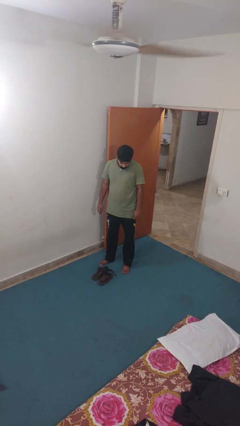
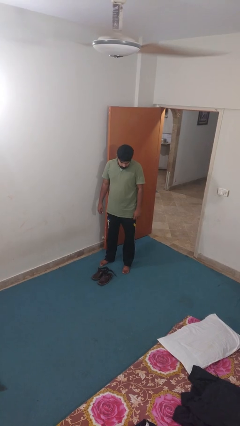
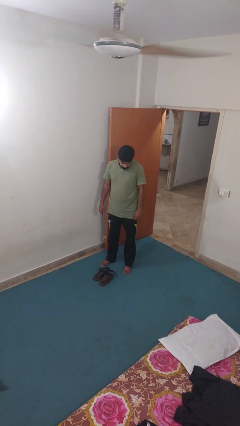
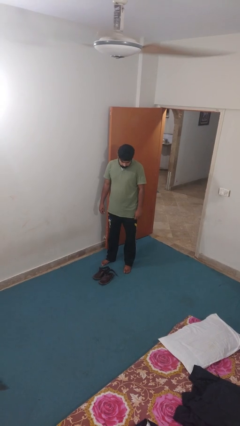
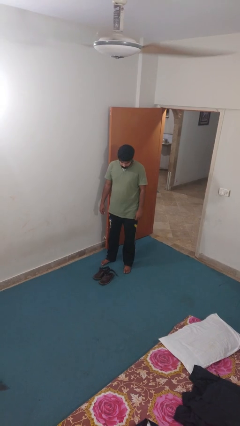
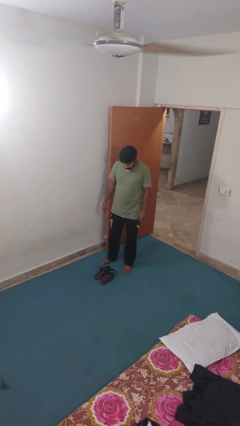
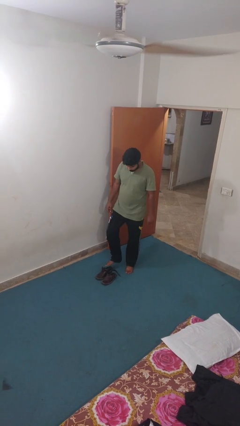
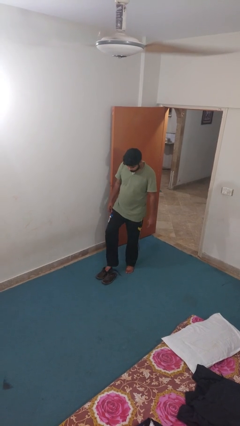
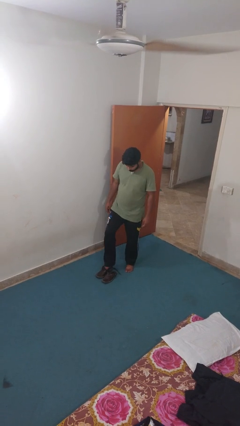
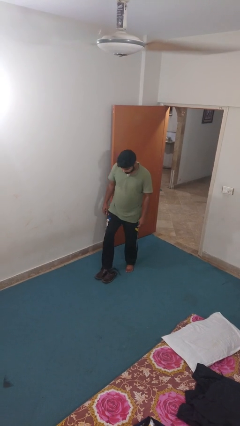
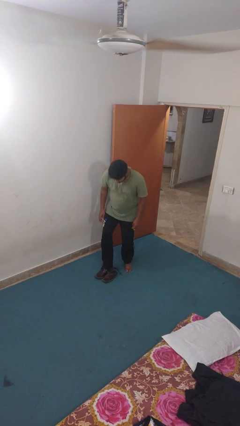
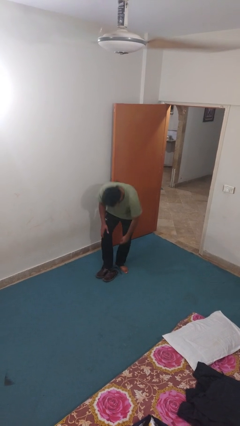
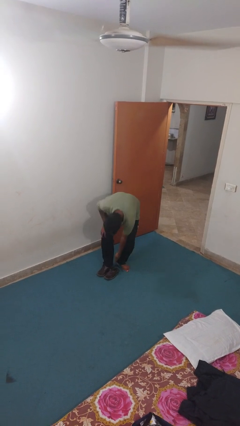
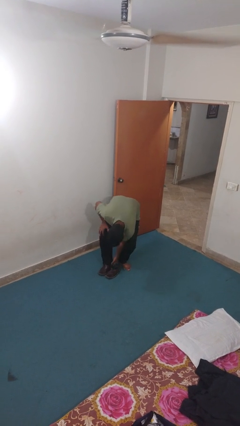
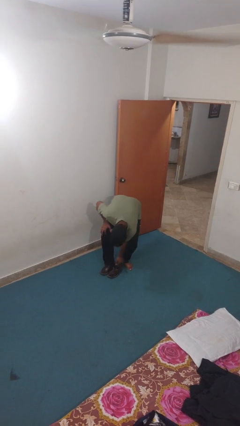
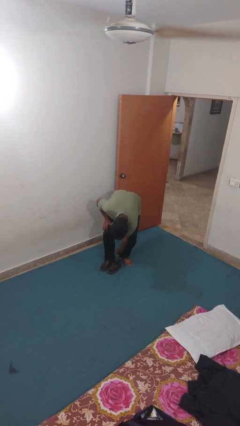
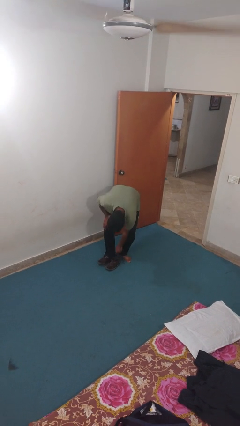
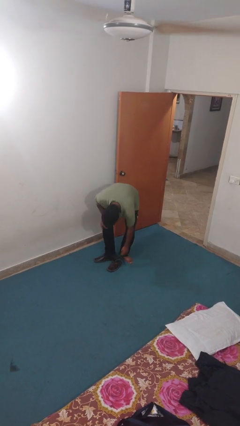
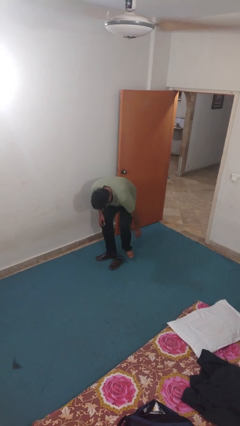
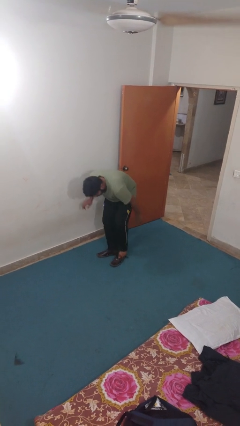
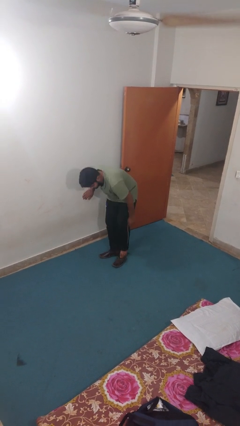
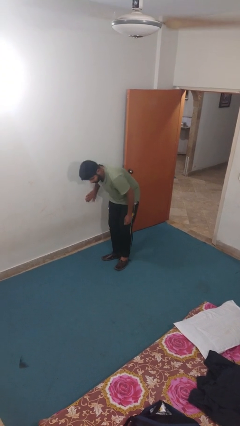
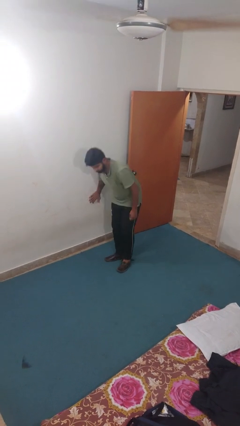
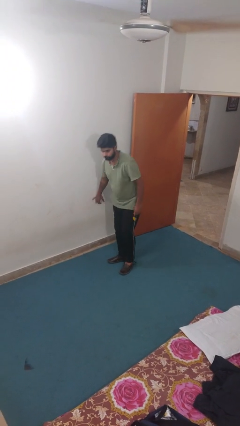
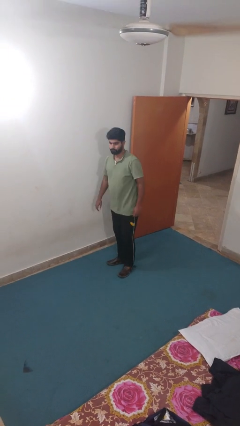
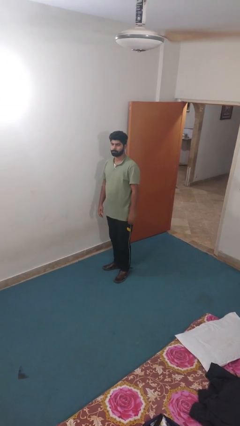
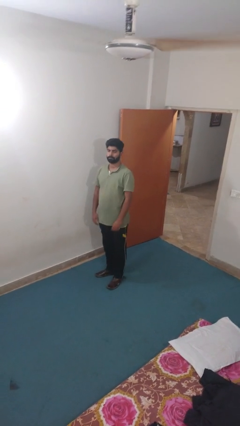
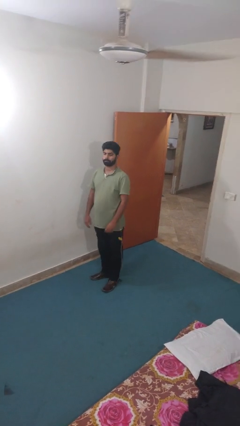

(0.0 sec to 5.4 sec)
person puts on shoes

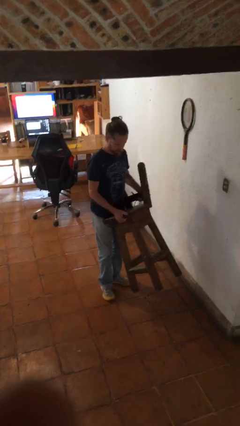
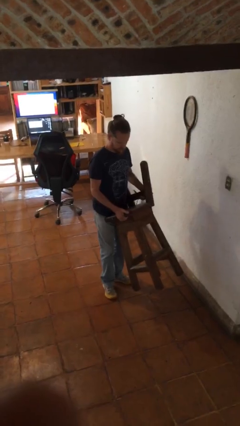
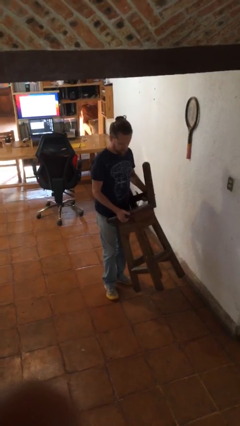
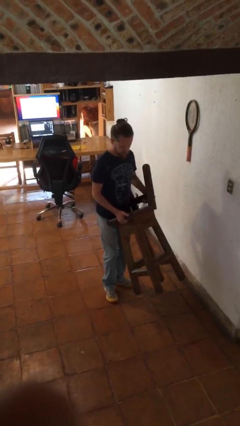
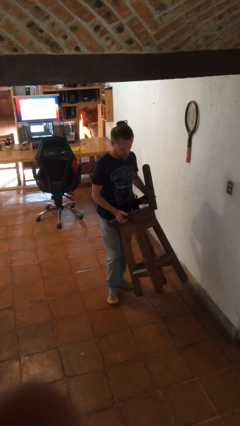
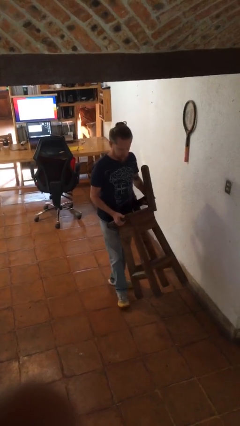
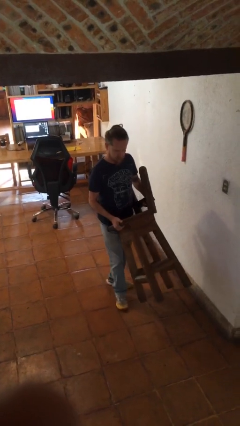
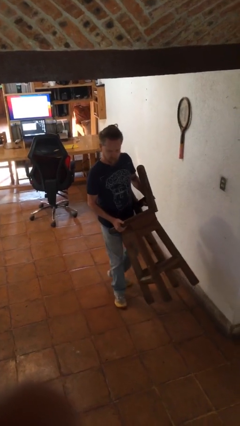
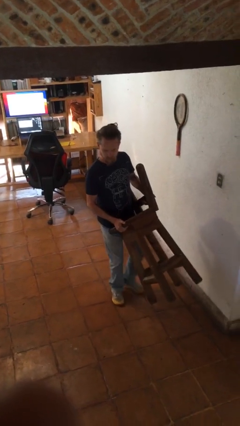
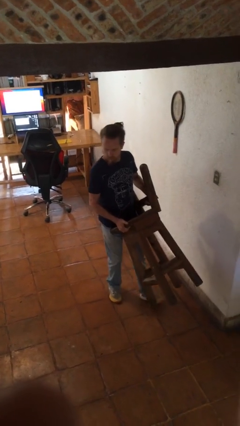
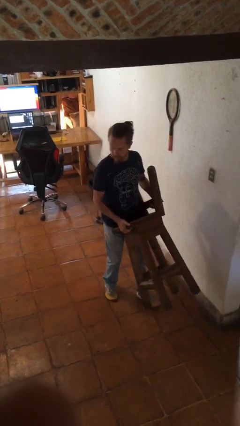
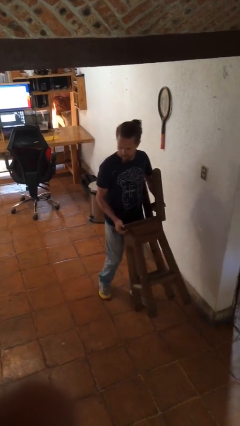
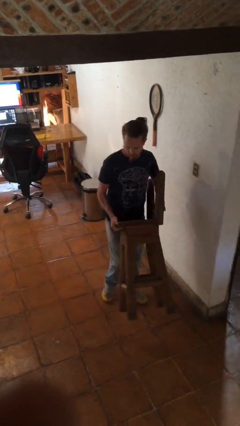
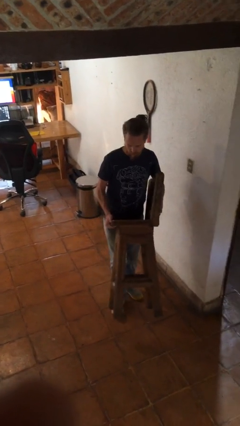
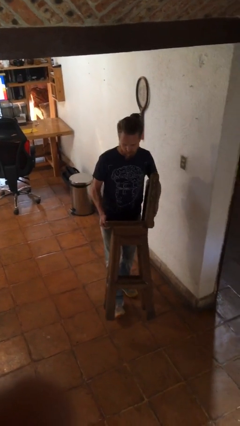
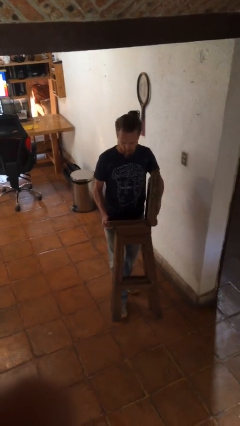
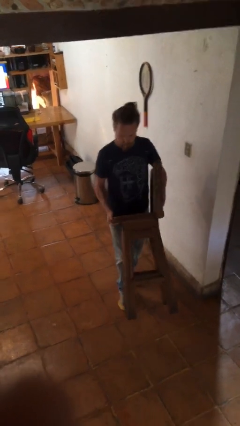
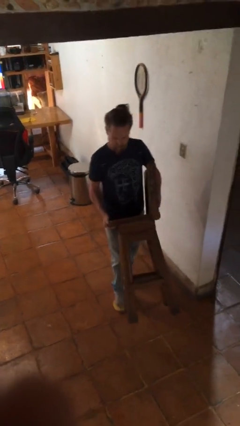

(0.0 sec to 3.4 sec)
person carries furniture

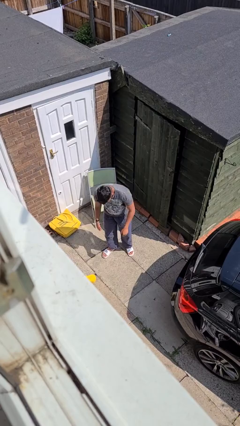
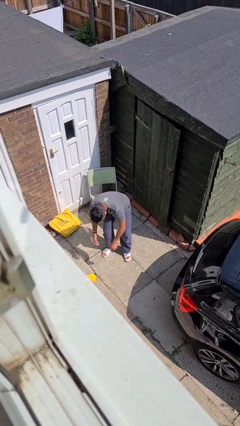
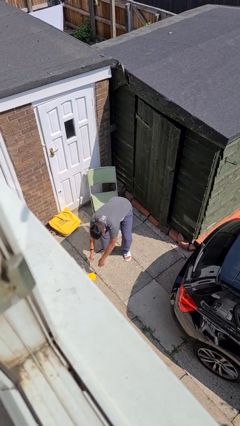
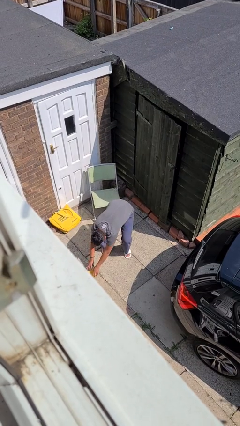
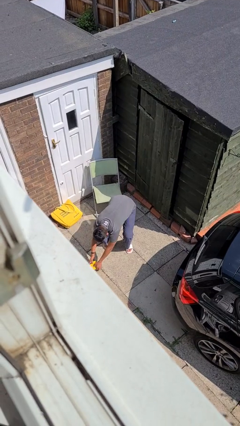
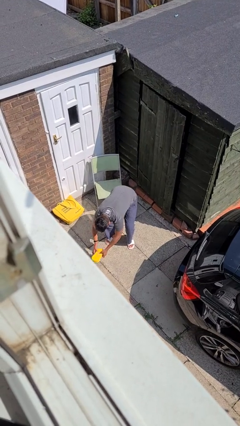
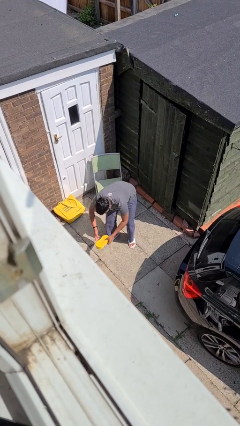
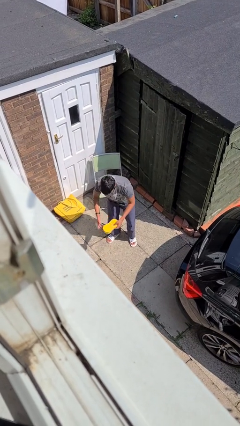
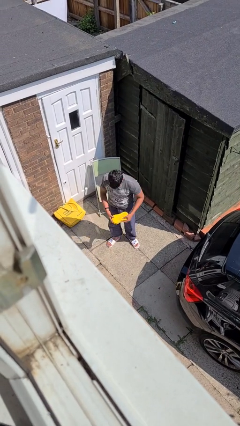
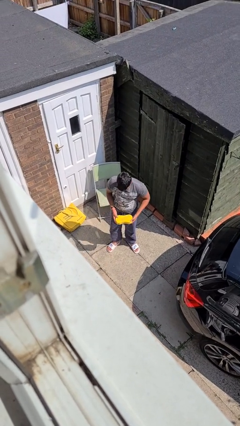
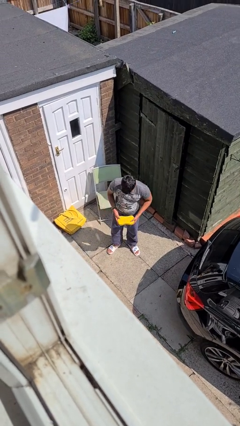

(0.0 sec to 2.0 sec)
person picks up object from floor

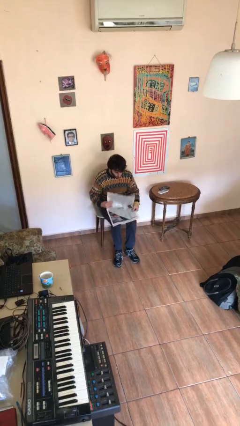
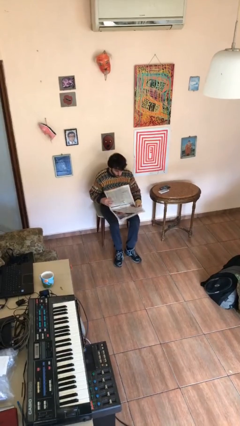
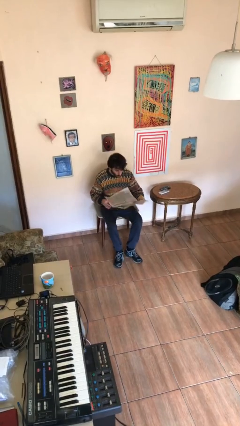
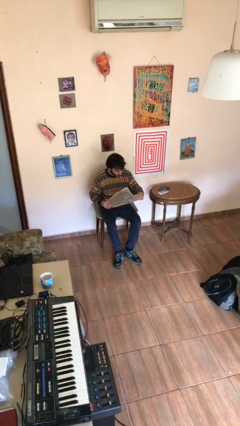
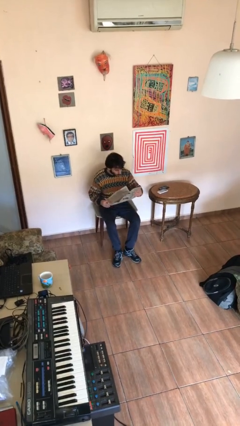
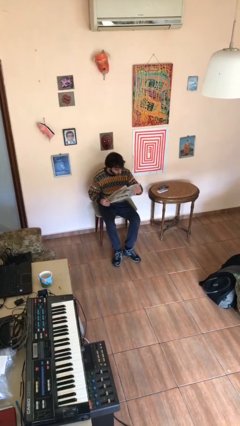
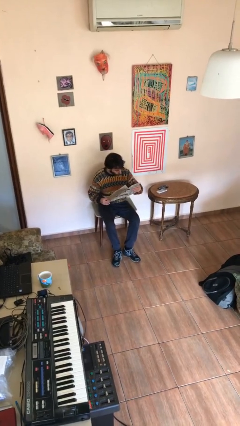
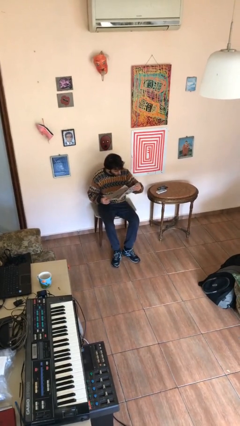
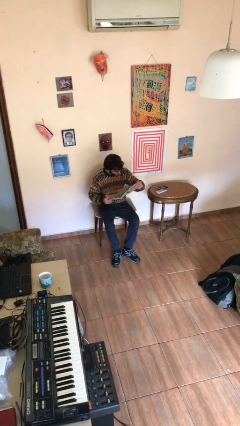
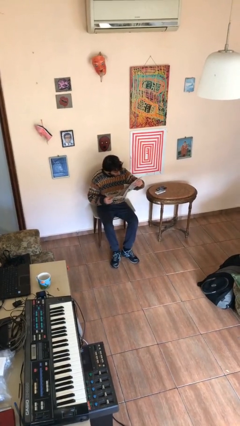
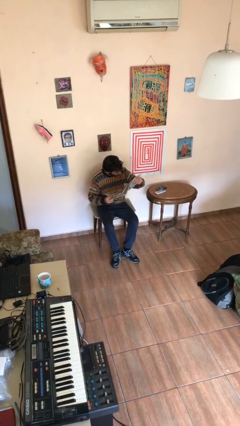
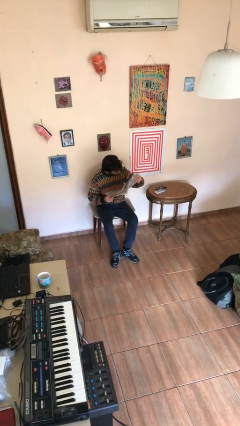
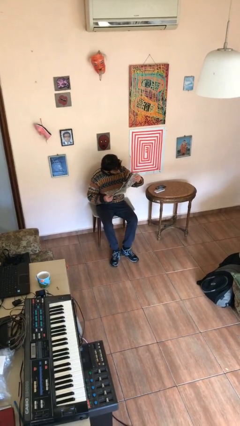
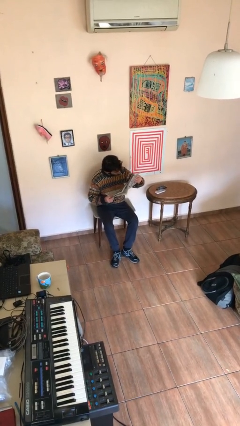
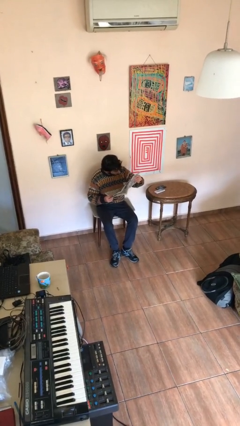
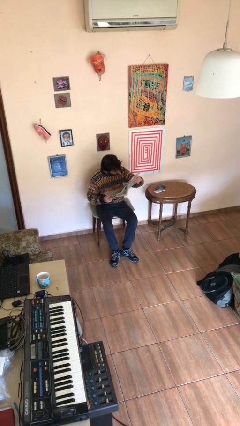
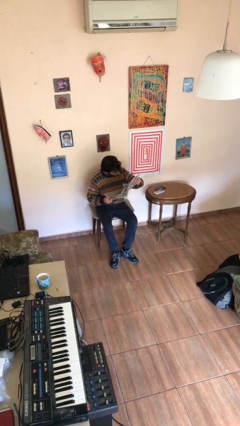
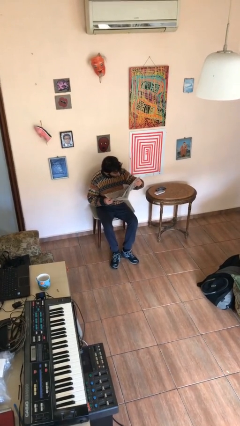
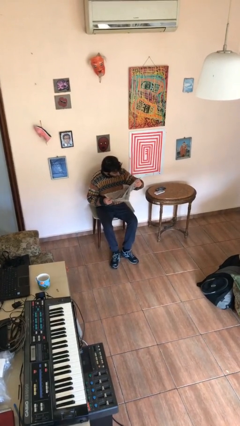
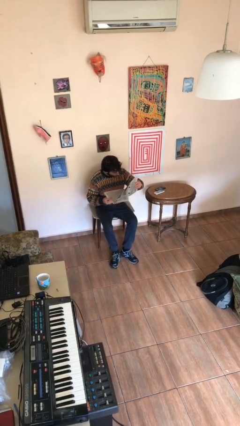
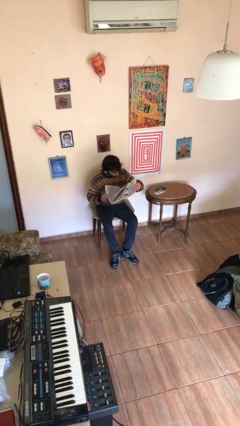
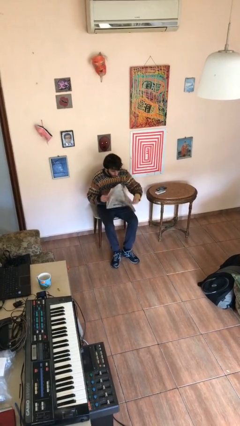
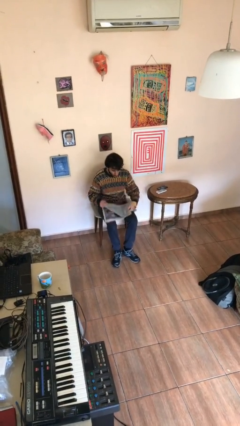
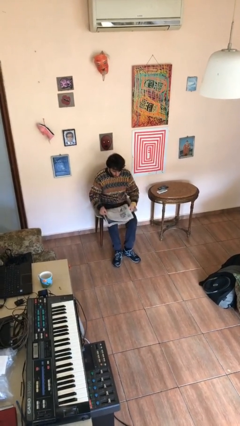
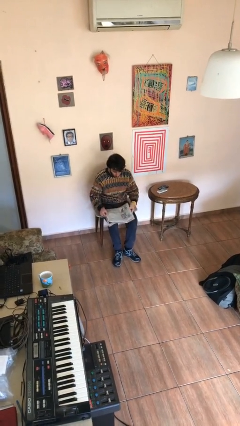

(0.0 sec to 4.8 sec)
person reads newspaper

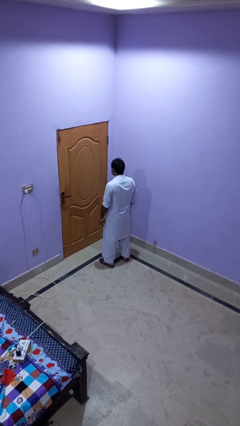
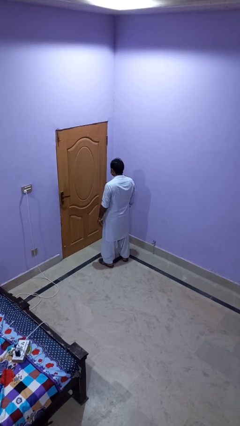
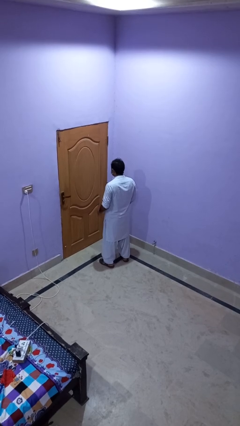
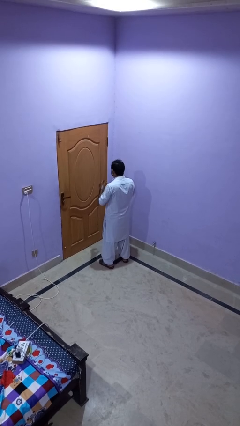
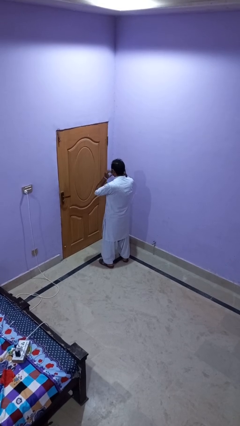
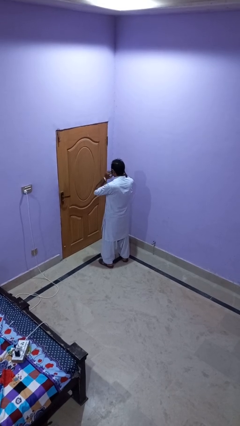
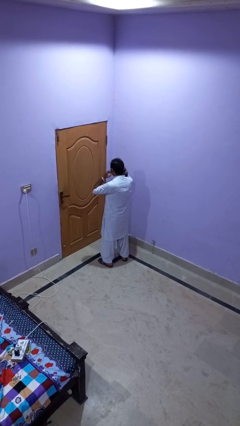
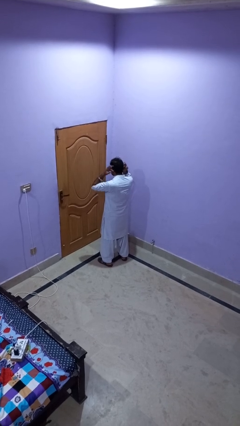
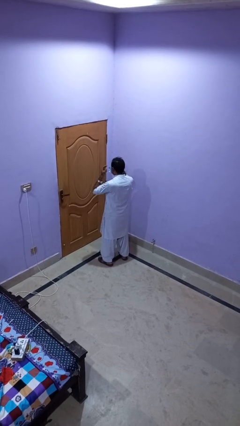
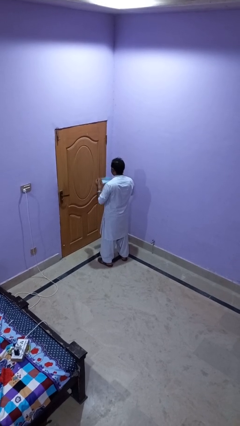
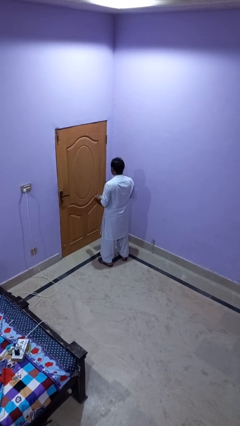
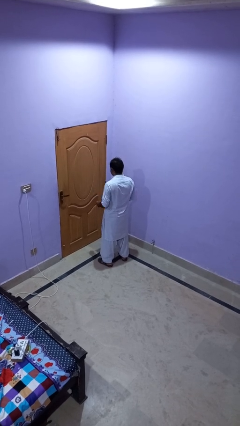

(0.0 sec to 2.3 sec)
person takes off facemask
